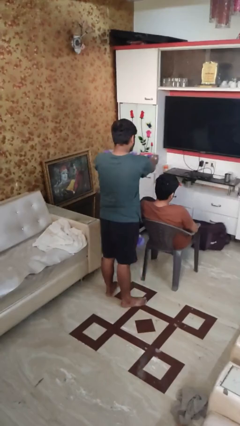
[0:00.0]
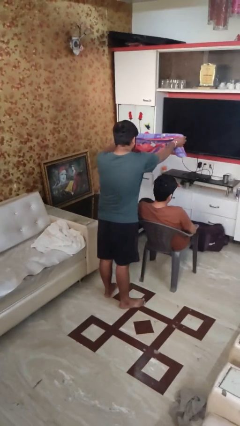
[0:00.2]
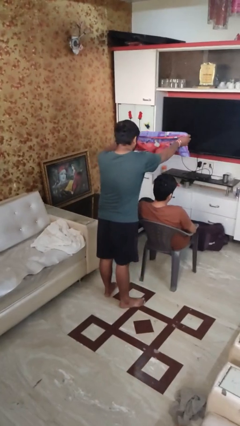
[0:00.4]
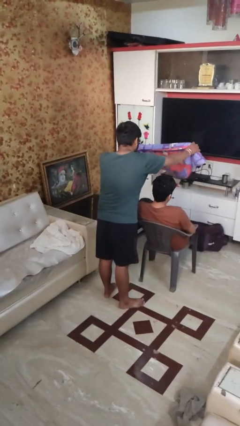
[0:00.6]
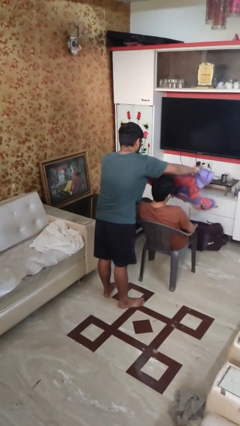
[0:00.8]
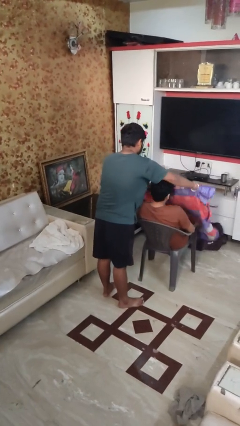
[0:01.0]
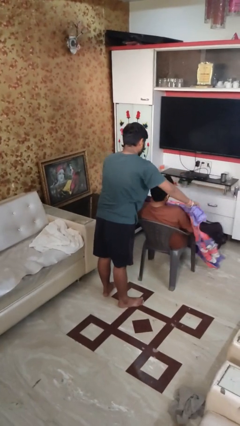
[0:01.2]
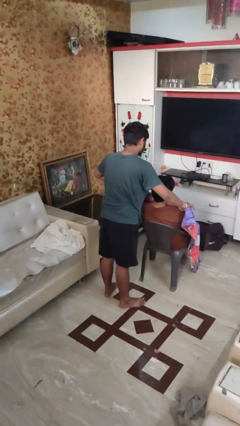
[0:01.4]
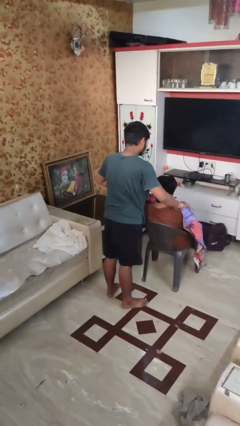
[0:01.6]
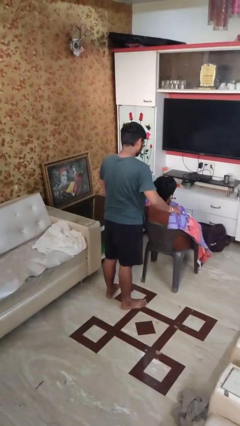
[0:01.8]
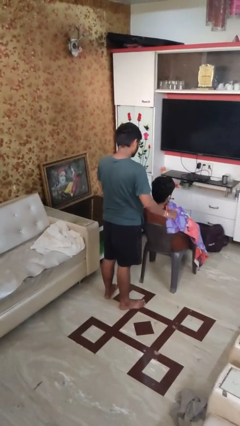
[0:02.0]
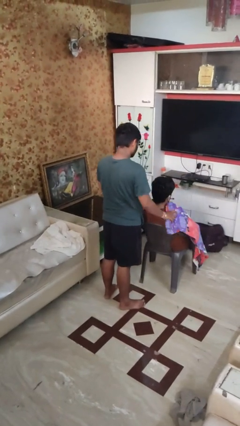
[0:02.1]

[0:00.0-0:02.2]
person covers friend with blanket

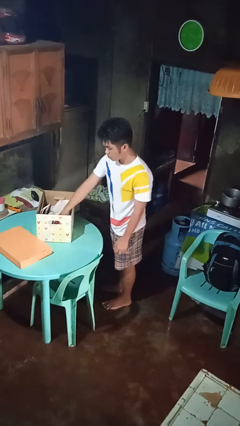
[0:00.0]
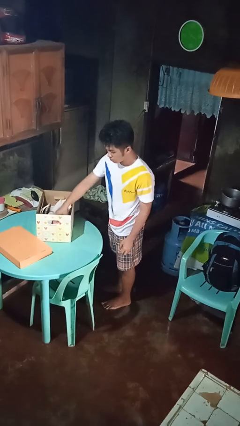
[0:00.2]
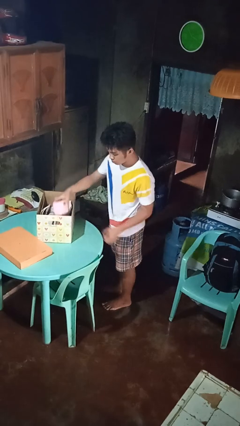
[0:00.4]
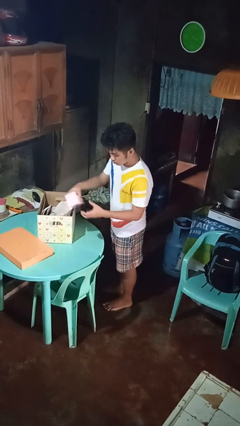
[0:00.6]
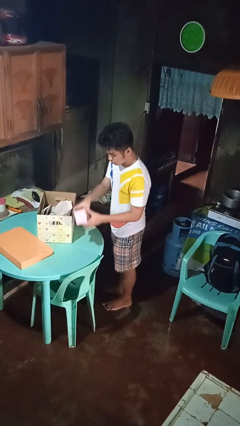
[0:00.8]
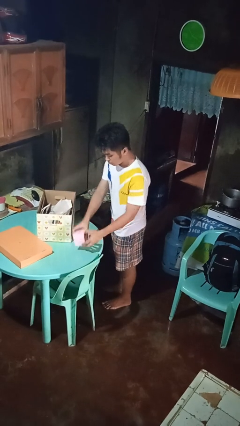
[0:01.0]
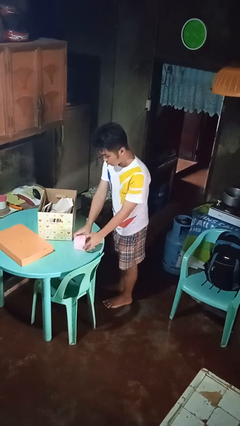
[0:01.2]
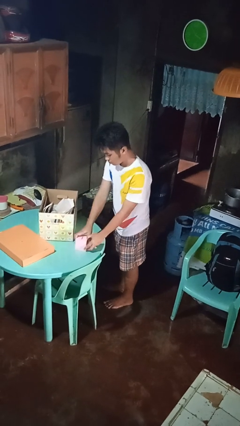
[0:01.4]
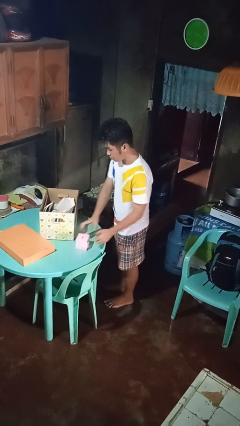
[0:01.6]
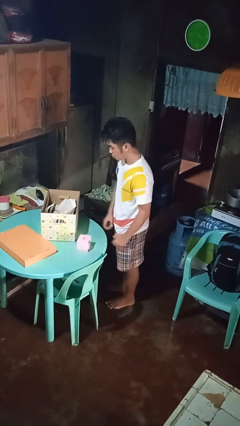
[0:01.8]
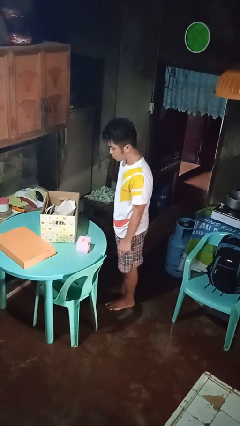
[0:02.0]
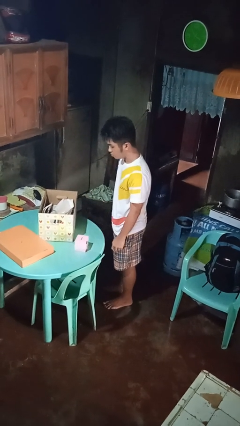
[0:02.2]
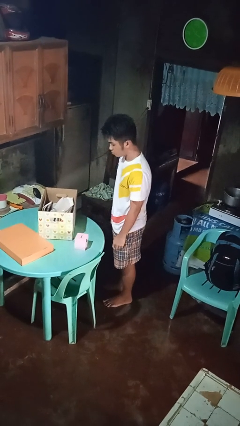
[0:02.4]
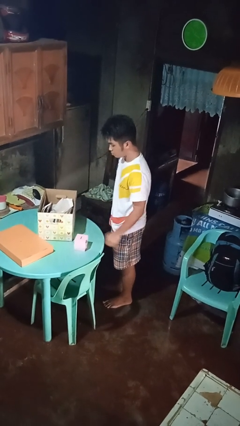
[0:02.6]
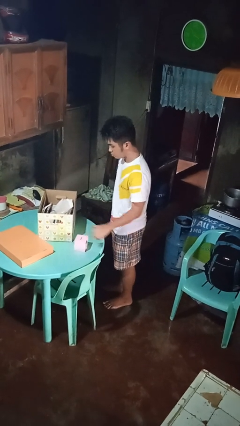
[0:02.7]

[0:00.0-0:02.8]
person takes object from box

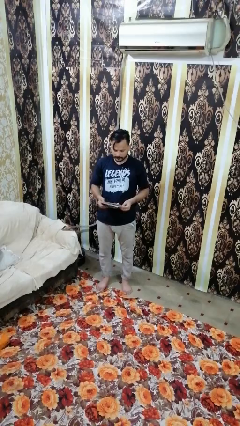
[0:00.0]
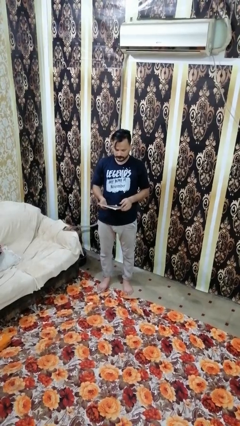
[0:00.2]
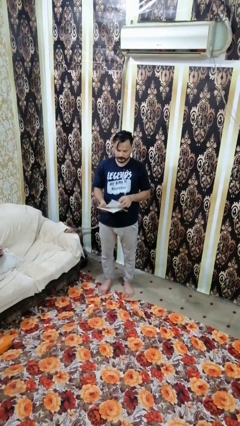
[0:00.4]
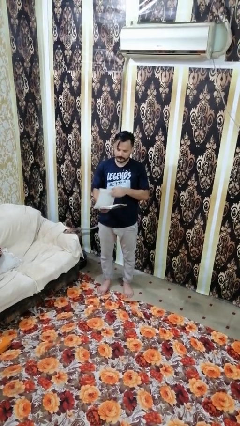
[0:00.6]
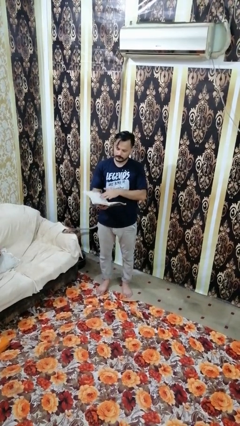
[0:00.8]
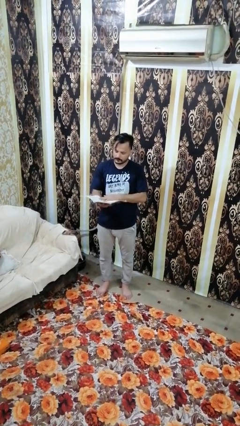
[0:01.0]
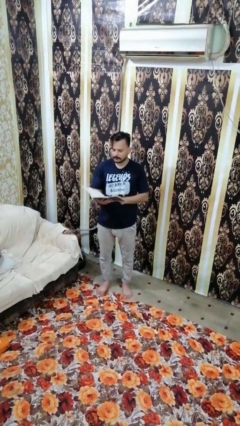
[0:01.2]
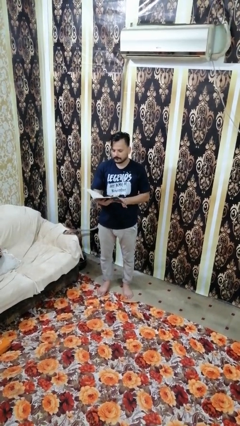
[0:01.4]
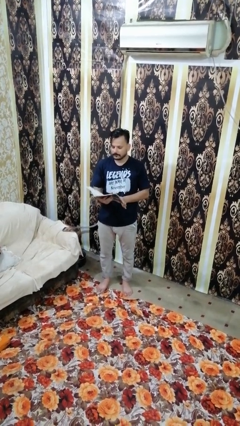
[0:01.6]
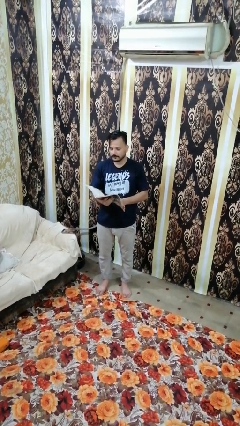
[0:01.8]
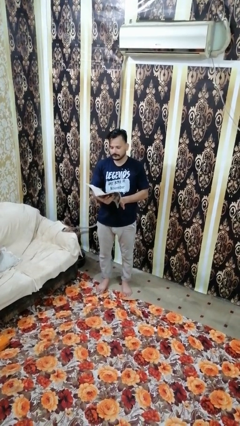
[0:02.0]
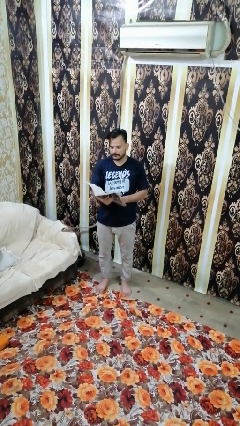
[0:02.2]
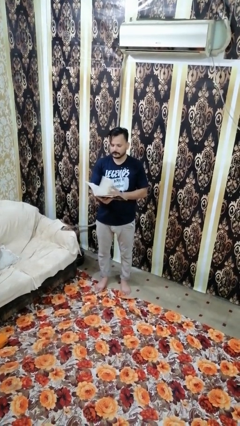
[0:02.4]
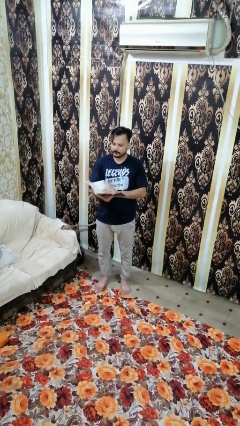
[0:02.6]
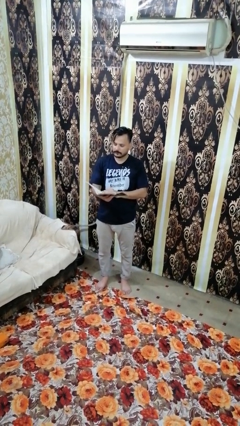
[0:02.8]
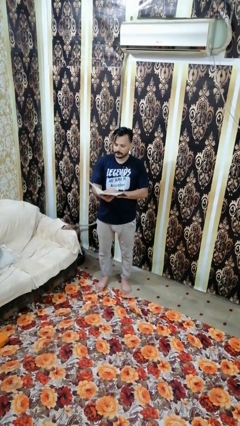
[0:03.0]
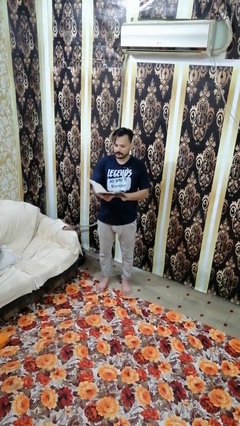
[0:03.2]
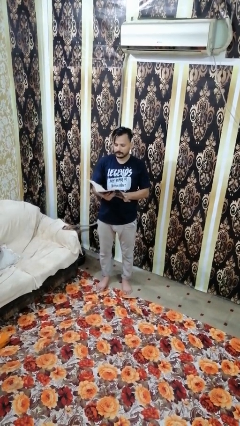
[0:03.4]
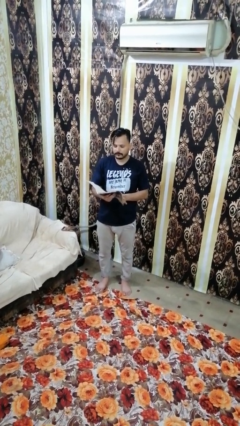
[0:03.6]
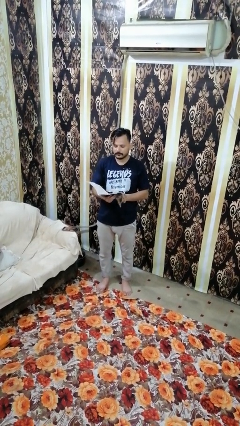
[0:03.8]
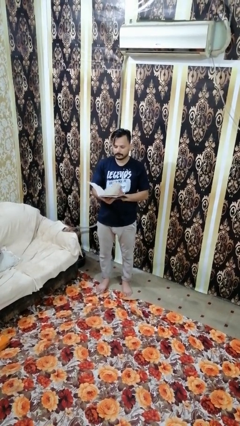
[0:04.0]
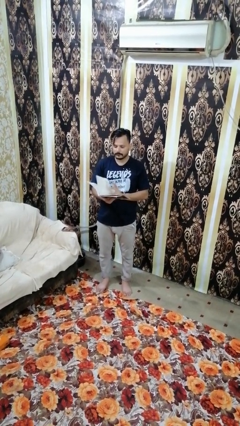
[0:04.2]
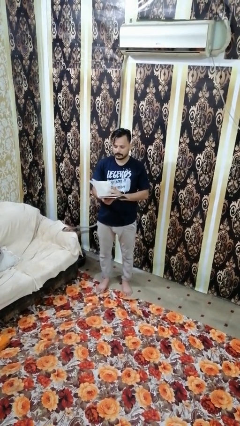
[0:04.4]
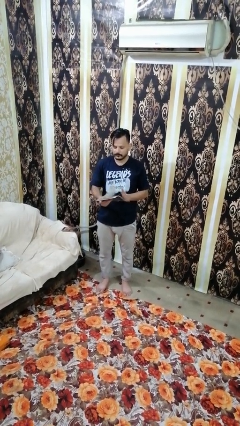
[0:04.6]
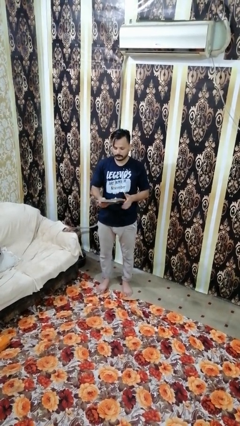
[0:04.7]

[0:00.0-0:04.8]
person reads book

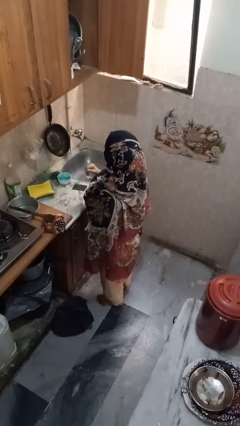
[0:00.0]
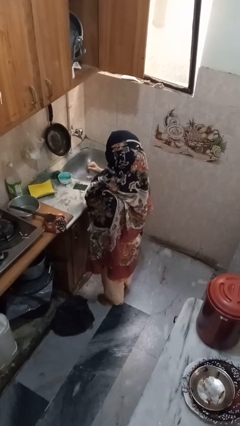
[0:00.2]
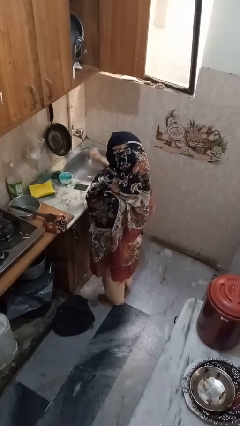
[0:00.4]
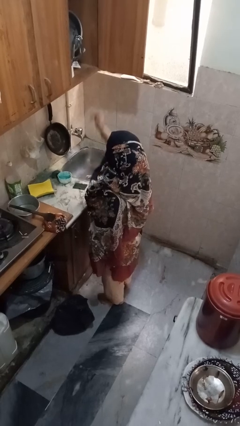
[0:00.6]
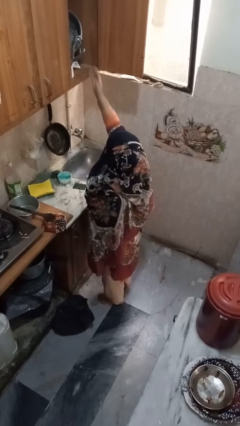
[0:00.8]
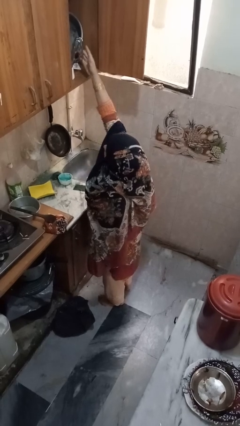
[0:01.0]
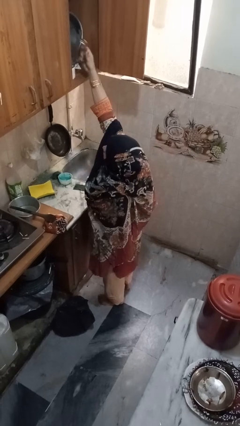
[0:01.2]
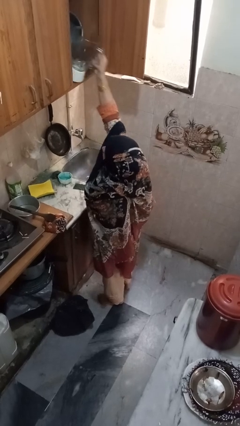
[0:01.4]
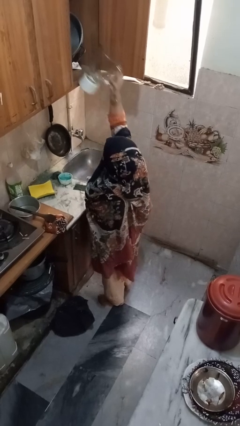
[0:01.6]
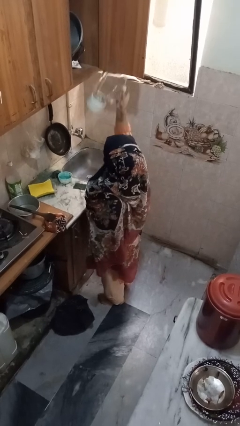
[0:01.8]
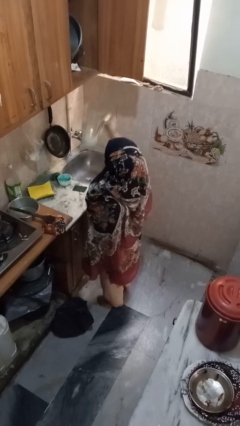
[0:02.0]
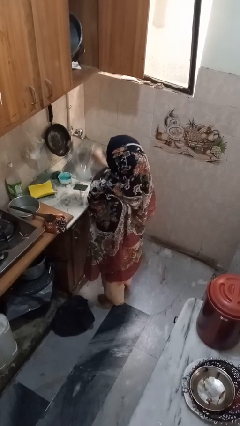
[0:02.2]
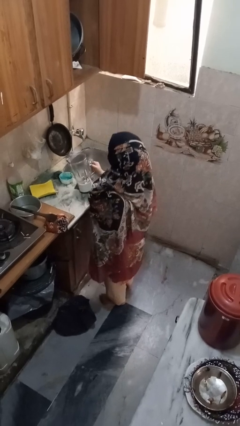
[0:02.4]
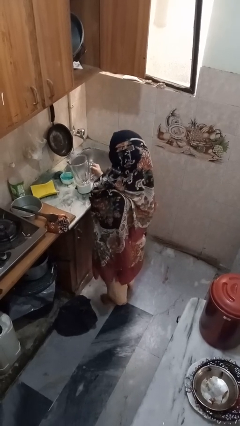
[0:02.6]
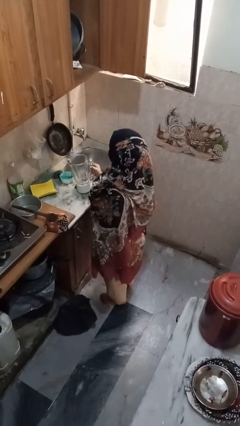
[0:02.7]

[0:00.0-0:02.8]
person puts object in cabinet

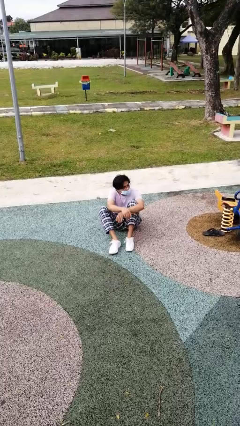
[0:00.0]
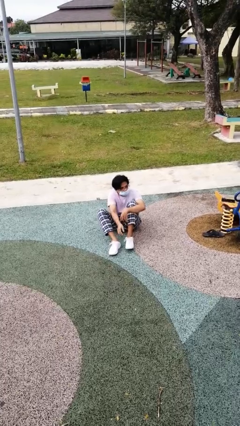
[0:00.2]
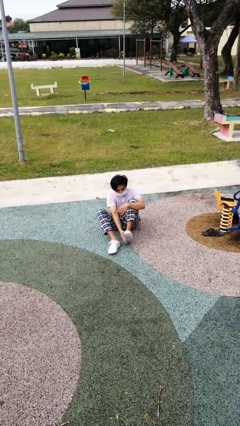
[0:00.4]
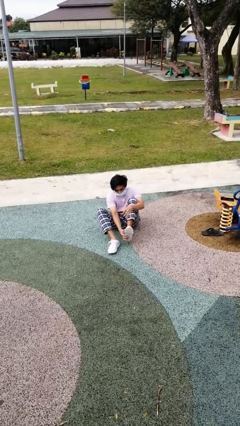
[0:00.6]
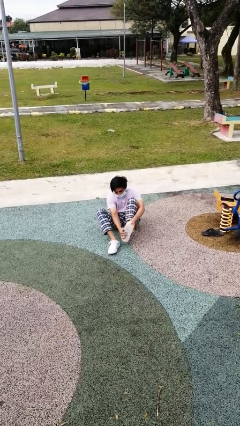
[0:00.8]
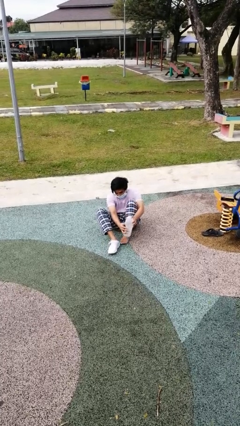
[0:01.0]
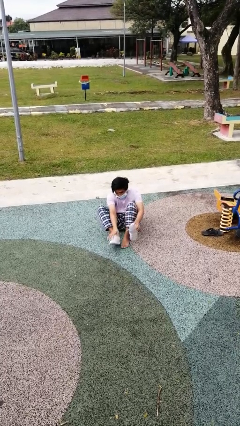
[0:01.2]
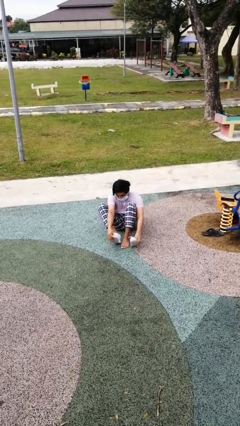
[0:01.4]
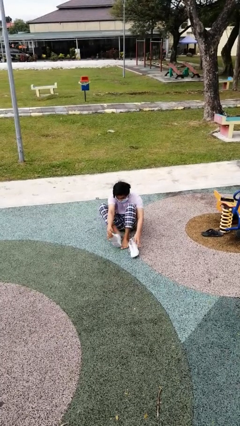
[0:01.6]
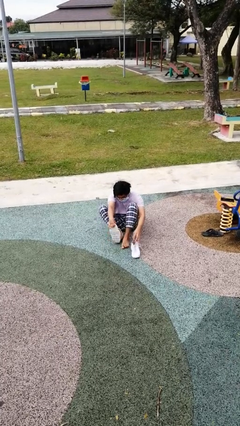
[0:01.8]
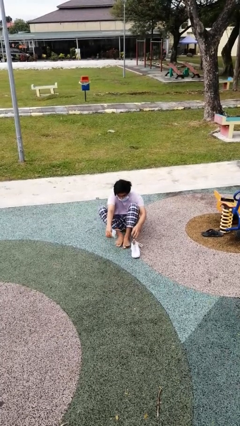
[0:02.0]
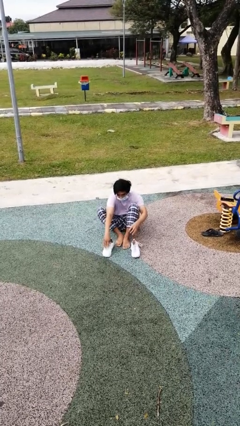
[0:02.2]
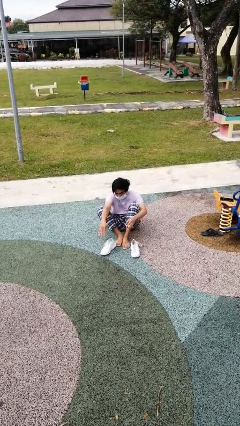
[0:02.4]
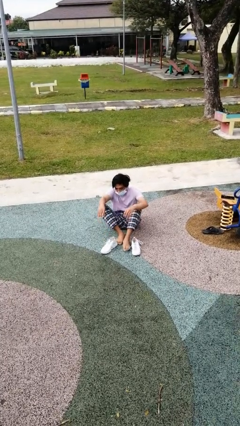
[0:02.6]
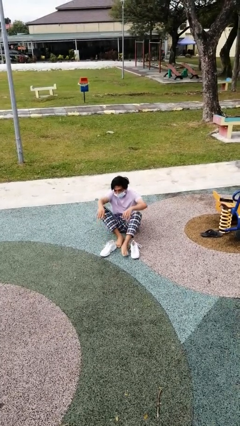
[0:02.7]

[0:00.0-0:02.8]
person takes off shoes

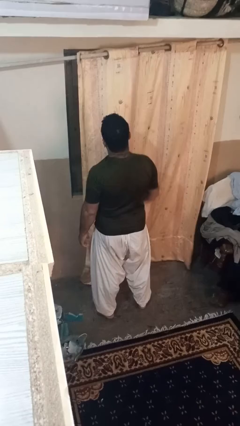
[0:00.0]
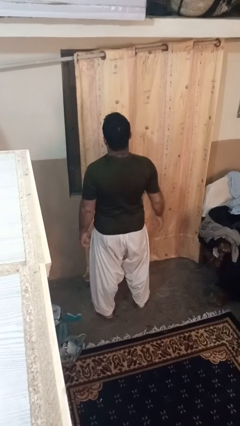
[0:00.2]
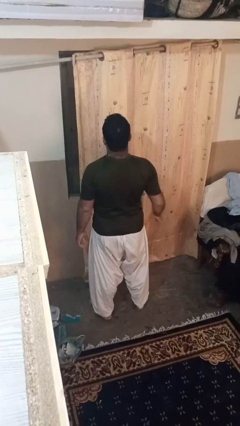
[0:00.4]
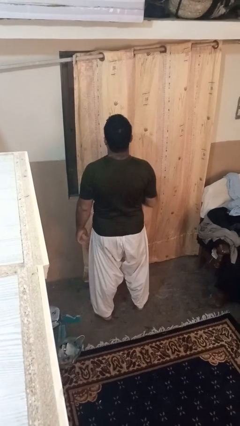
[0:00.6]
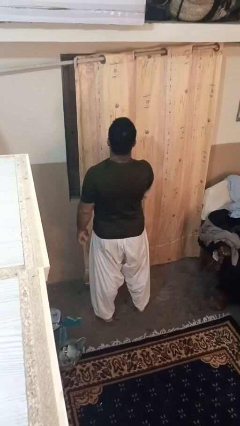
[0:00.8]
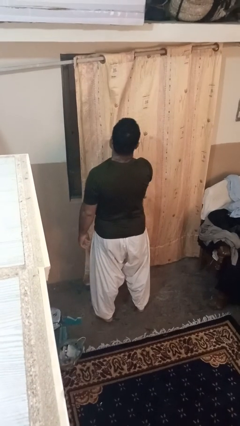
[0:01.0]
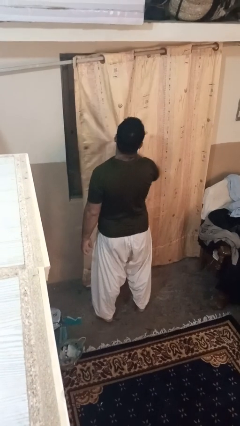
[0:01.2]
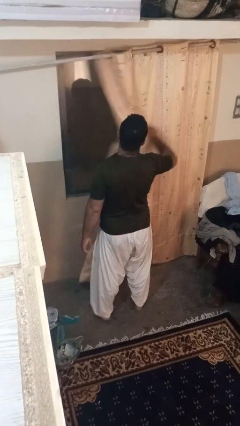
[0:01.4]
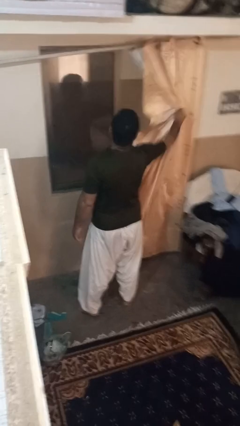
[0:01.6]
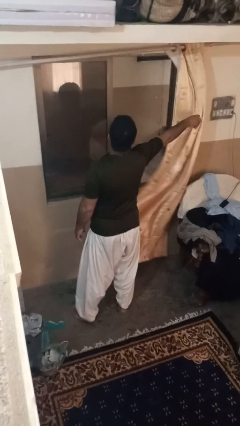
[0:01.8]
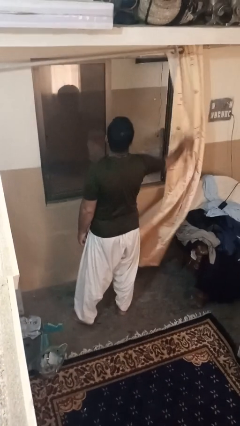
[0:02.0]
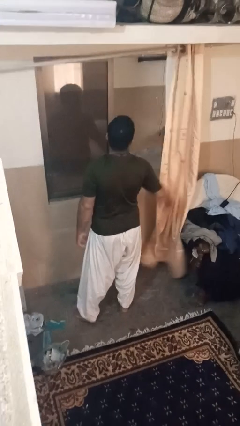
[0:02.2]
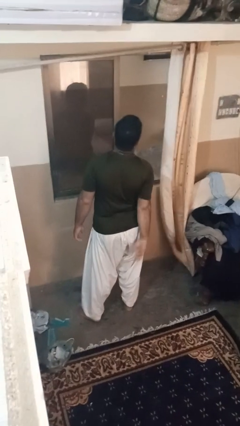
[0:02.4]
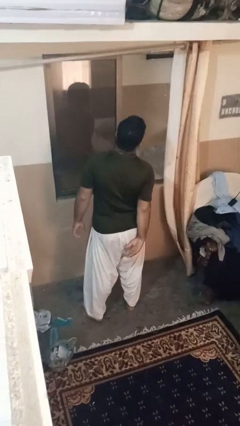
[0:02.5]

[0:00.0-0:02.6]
person opens curtains
